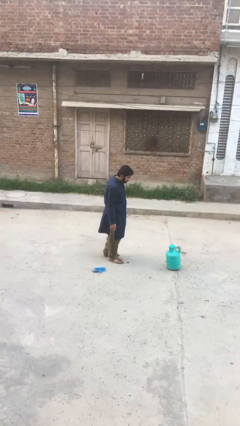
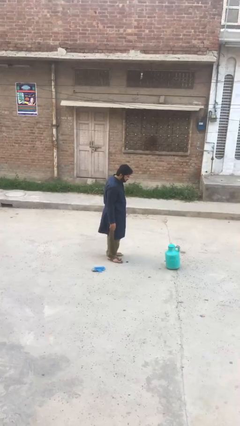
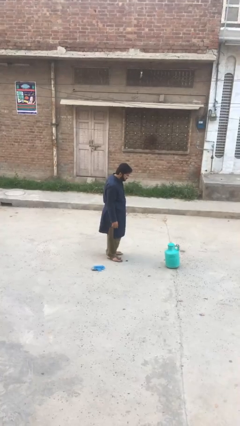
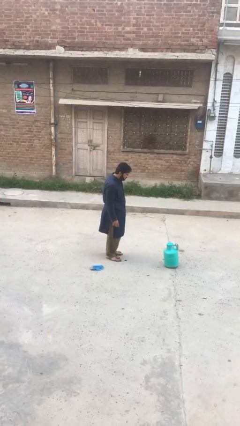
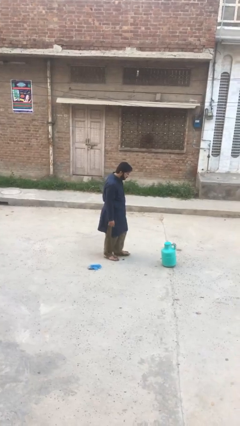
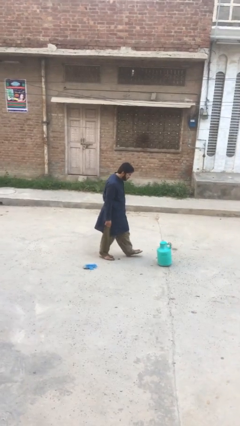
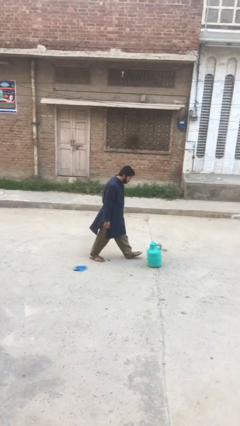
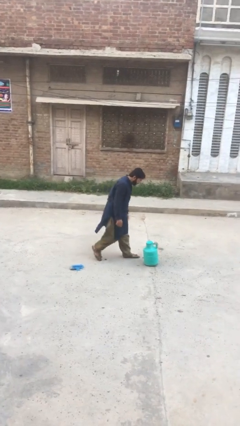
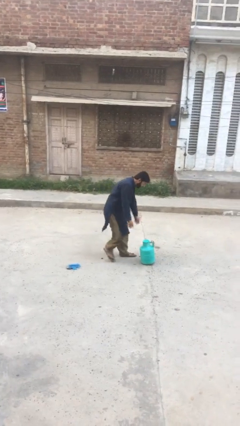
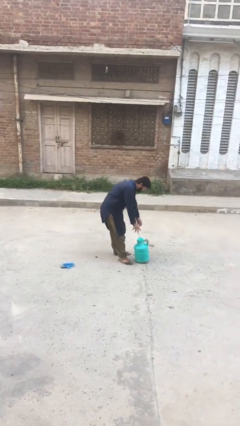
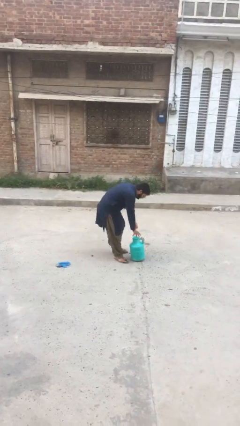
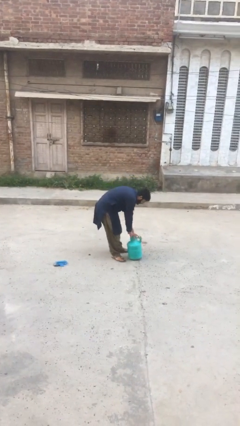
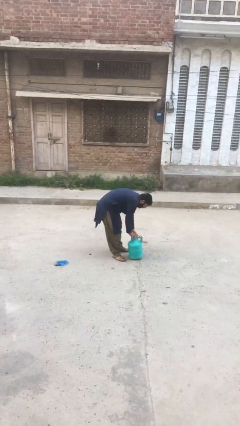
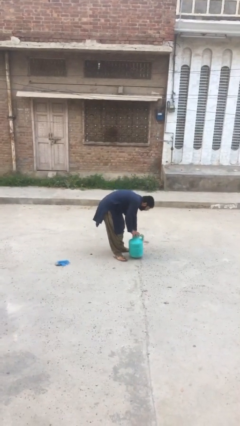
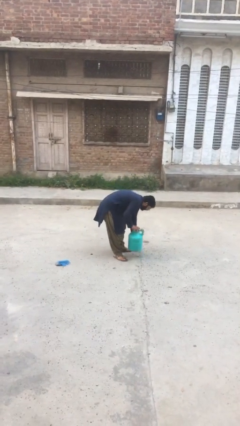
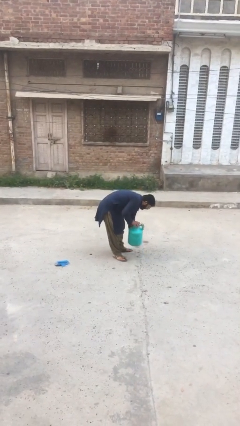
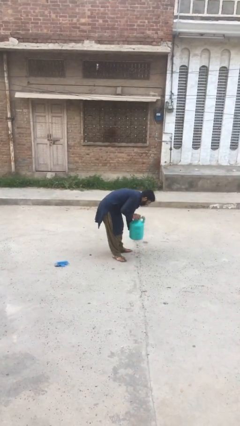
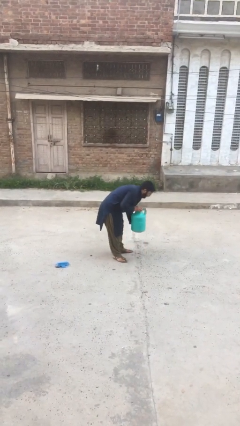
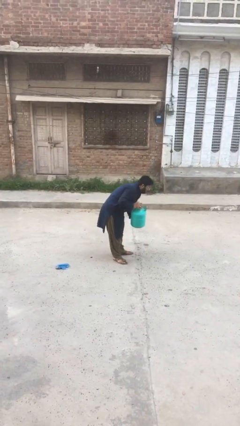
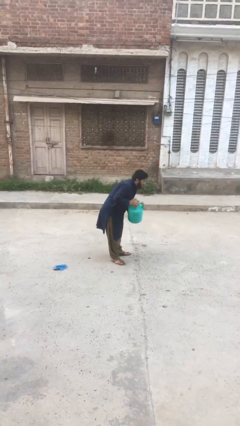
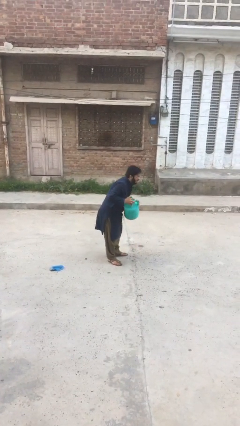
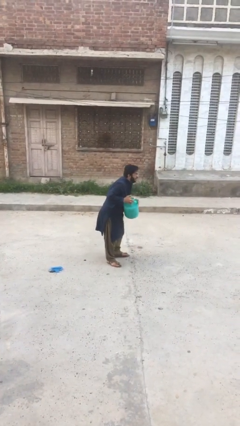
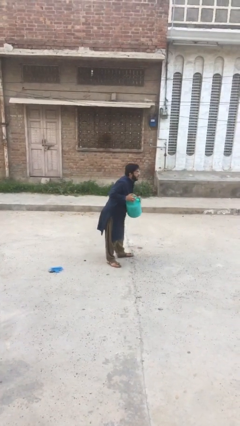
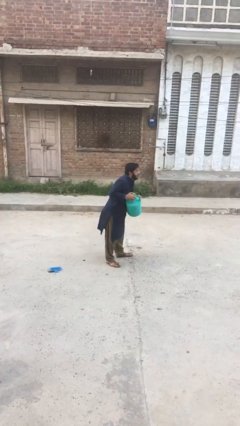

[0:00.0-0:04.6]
person picks up object from floor

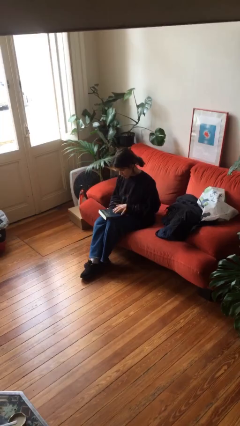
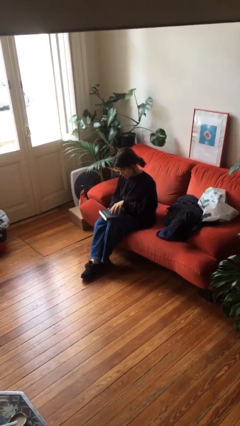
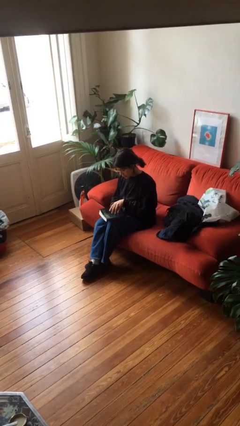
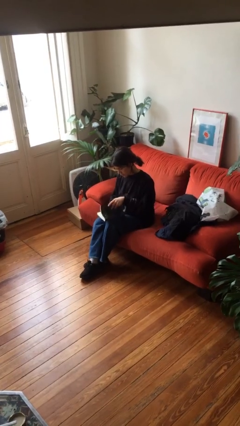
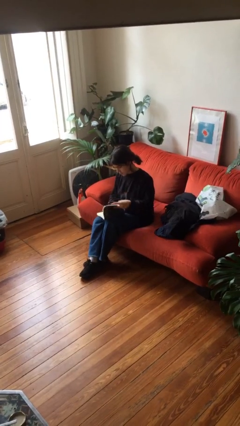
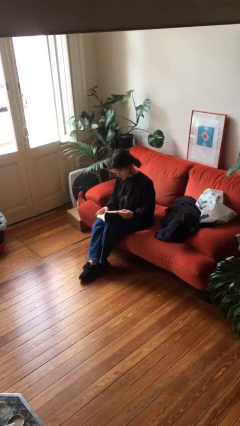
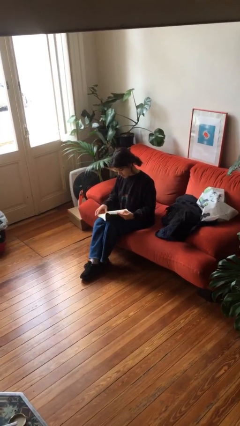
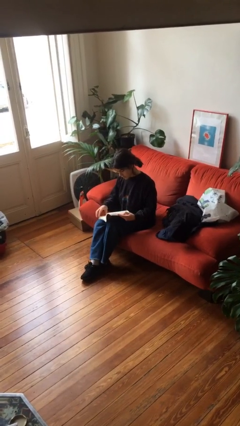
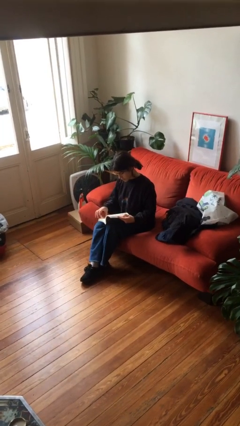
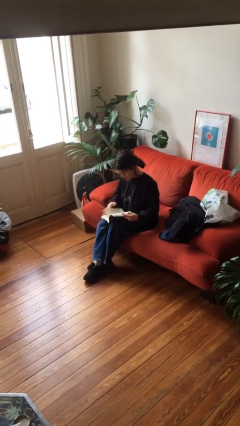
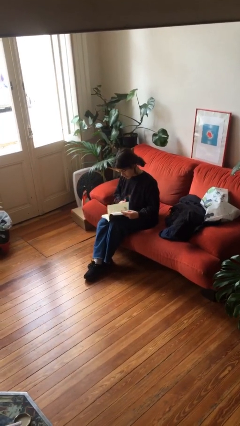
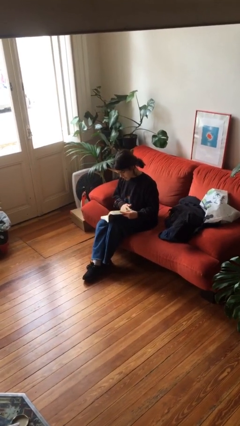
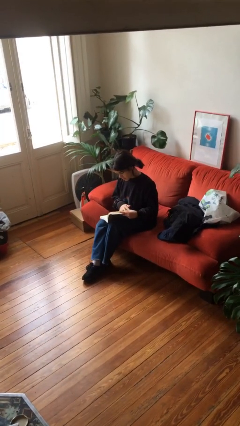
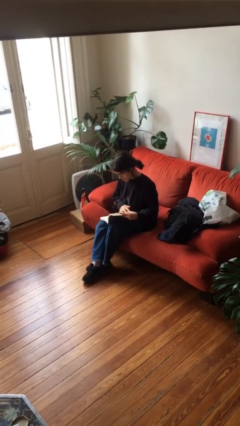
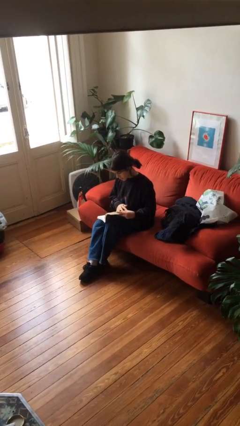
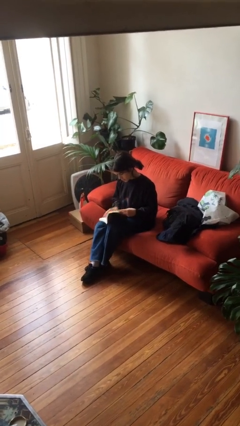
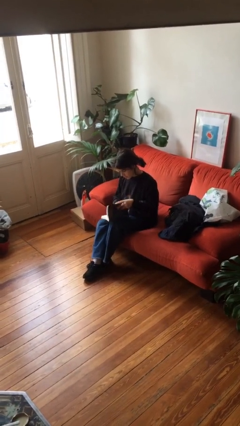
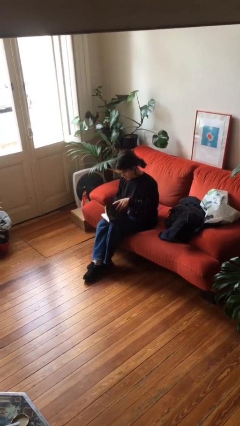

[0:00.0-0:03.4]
person reads book

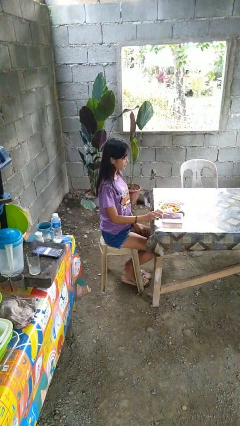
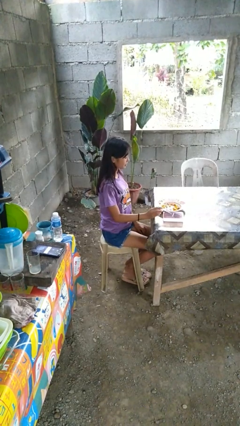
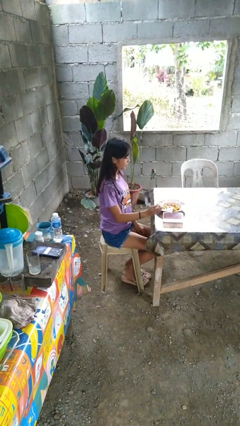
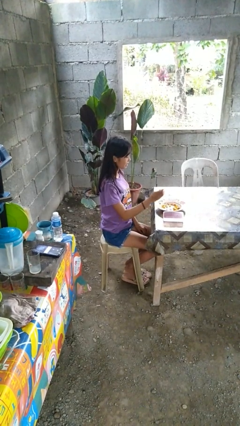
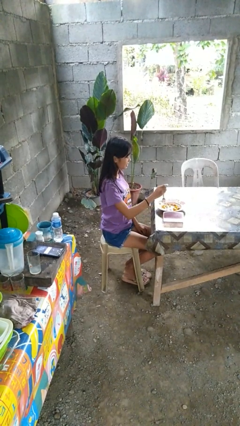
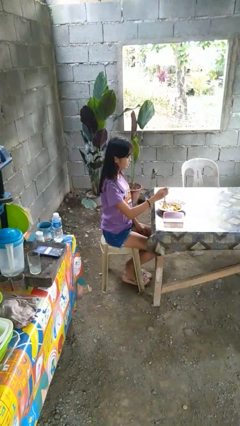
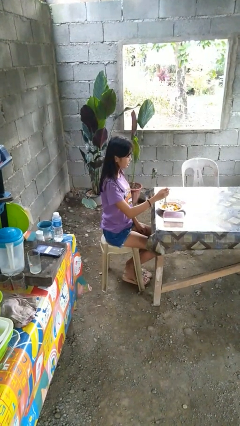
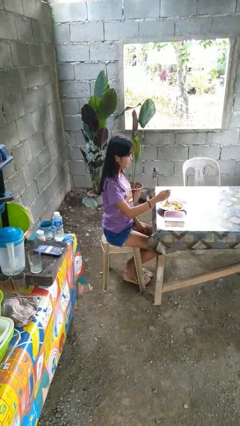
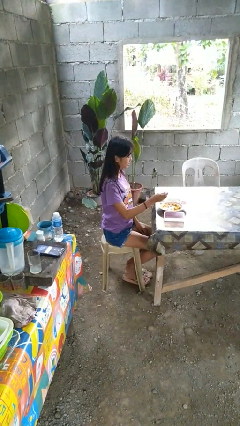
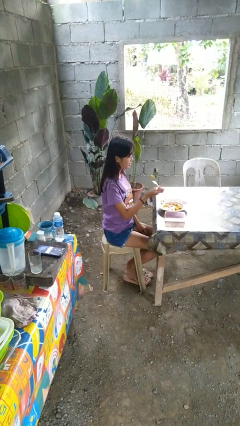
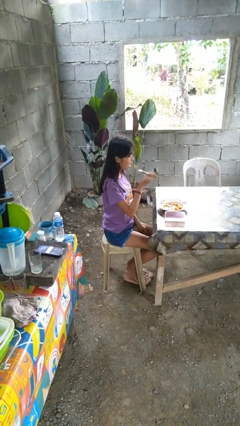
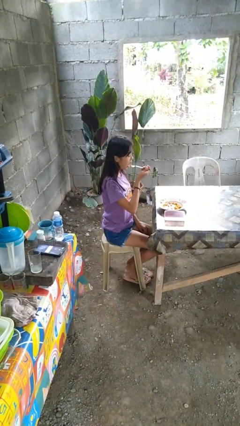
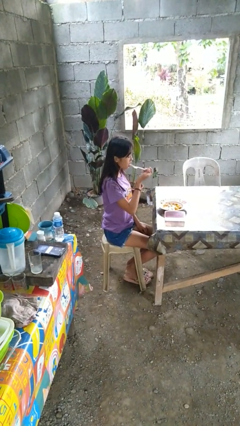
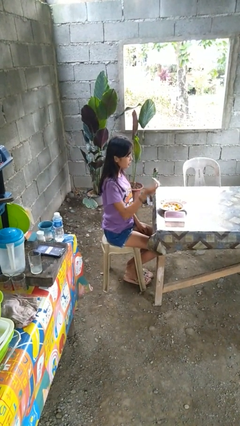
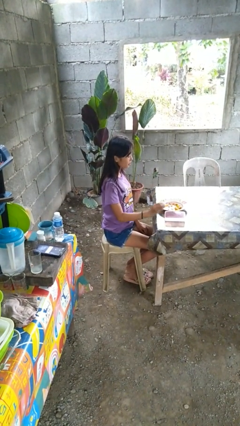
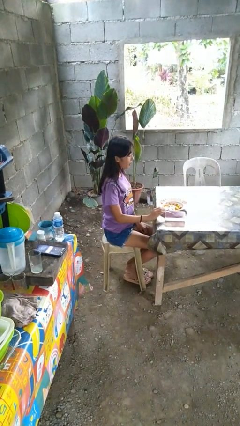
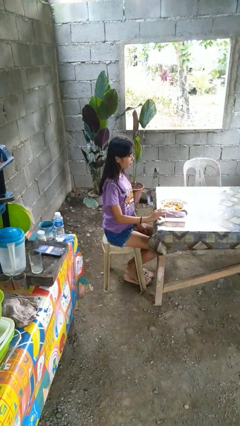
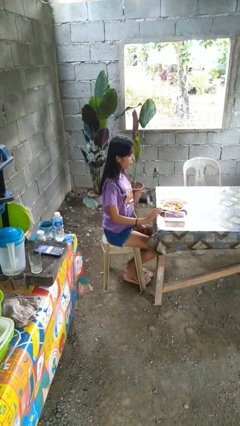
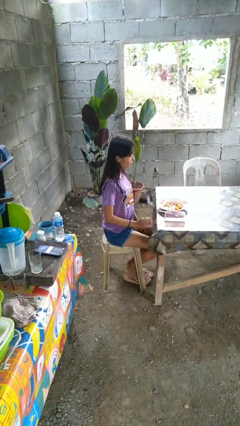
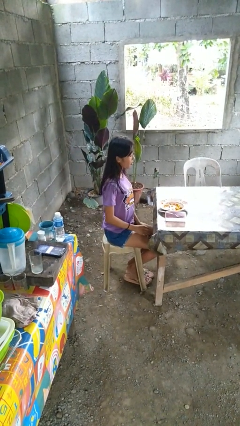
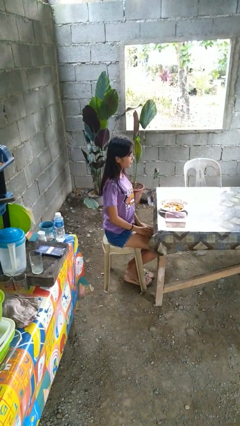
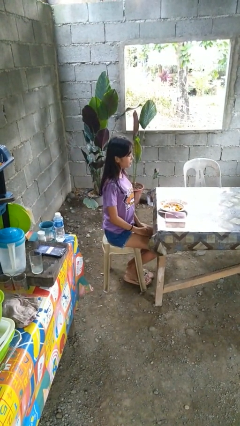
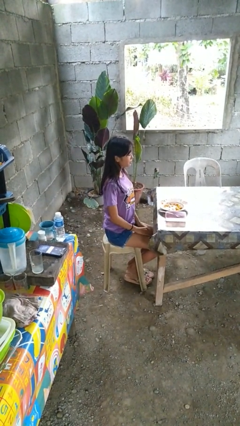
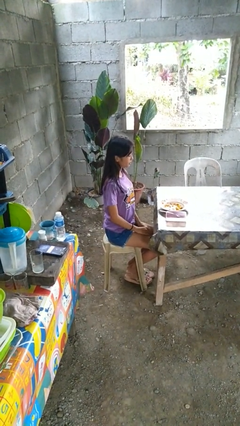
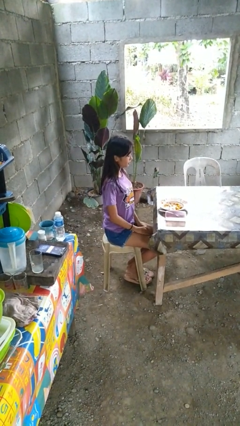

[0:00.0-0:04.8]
person eats with utensil

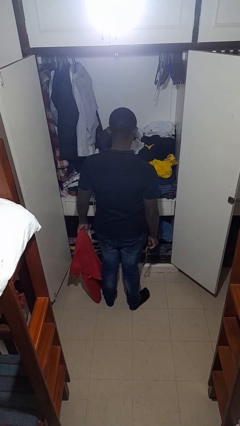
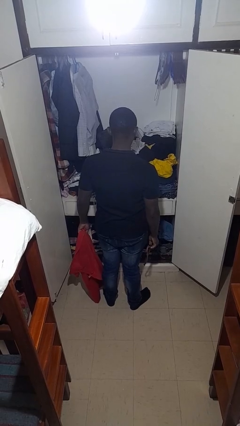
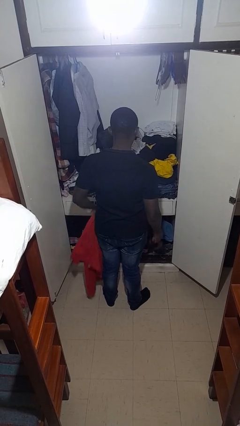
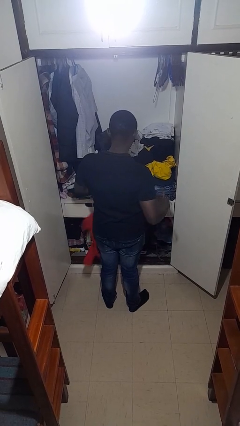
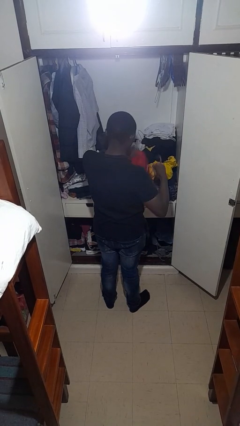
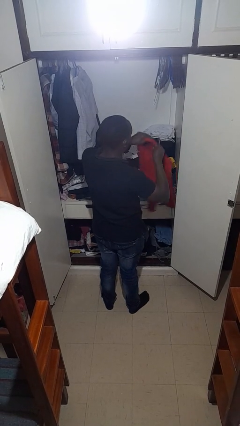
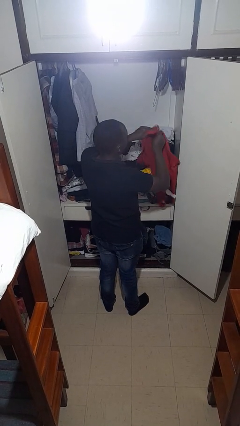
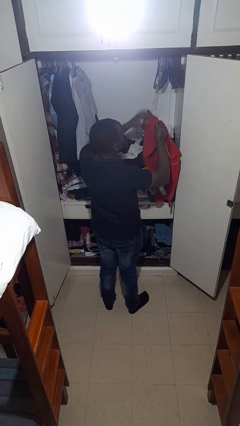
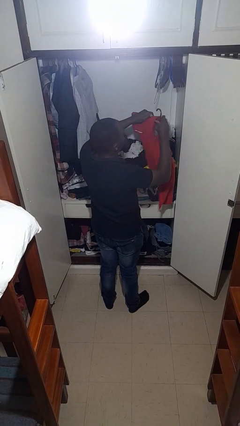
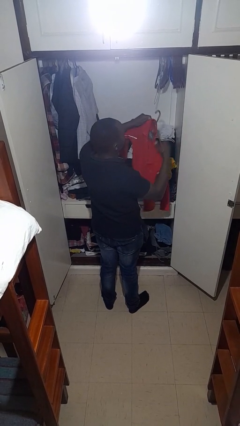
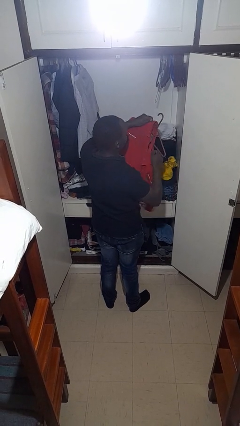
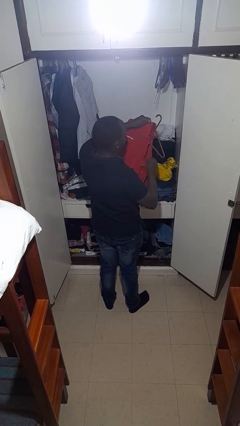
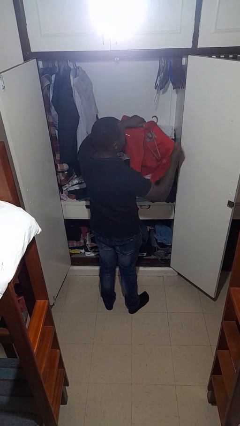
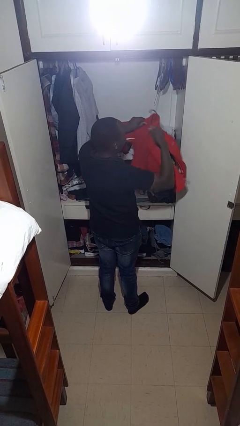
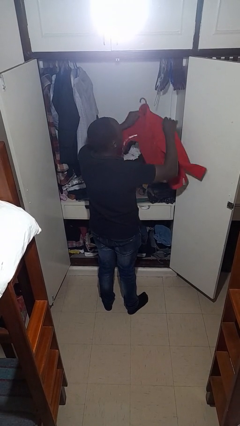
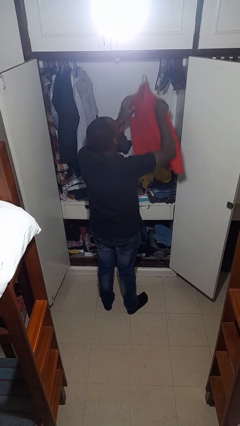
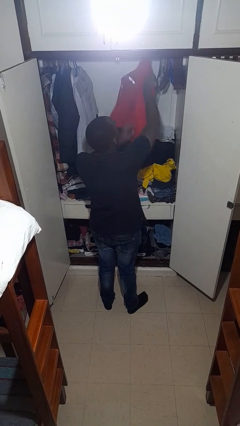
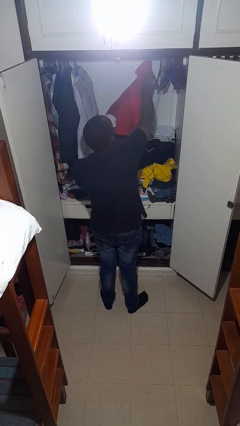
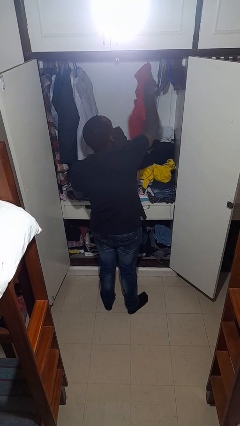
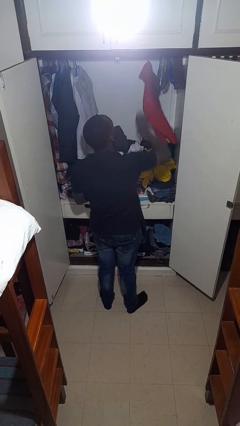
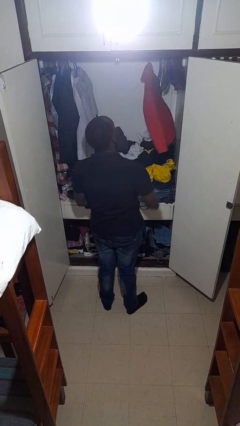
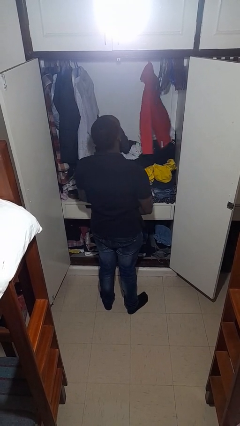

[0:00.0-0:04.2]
person puts clothes into closet

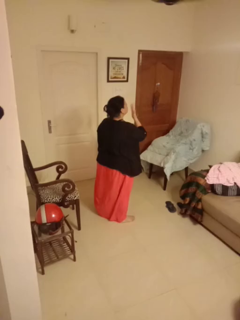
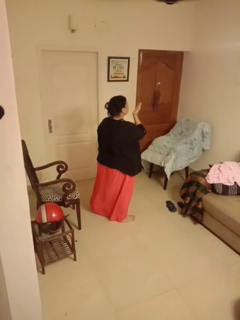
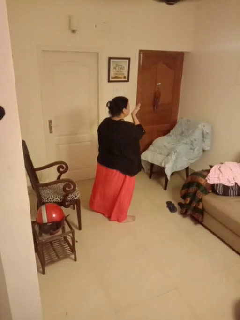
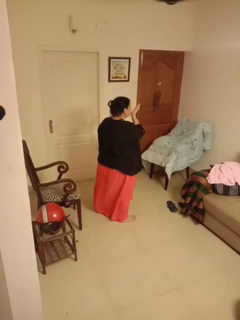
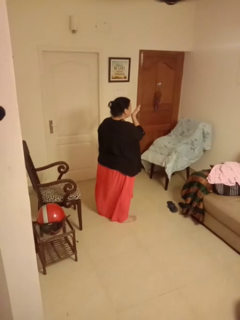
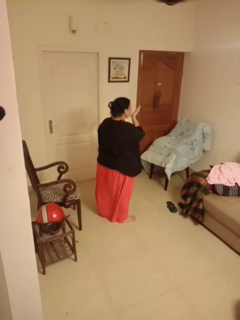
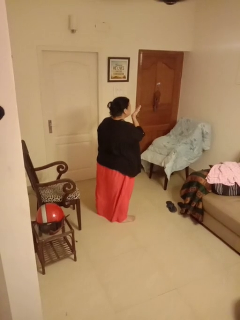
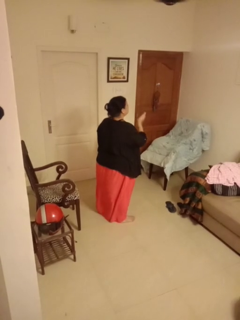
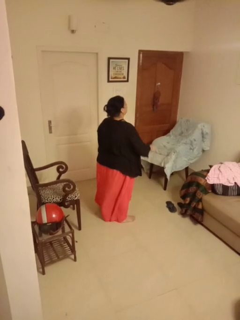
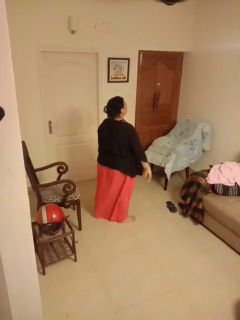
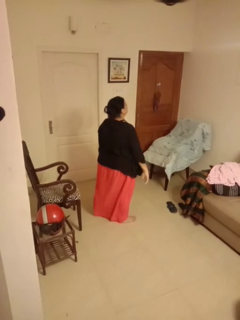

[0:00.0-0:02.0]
person gestures blow kiss
